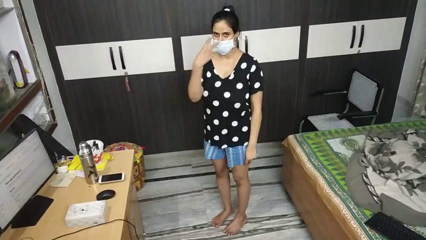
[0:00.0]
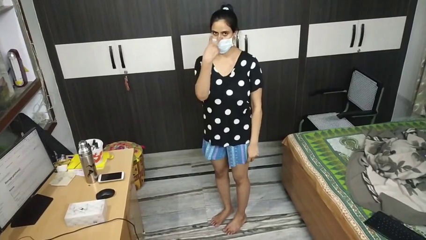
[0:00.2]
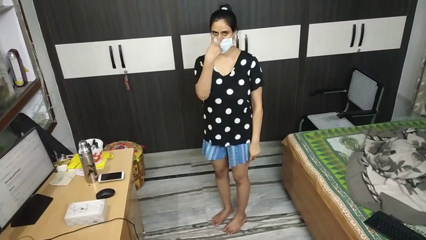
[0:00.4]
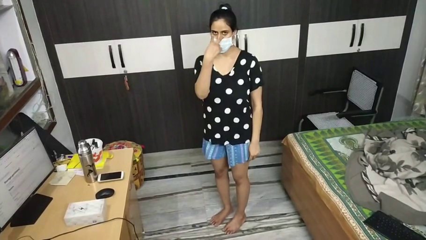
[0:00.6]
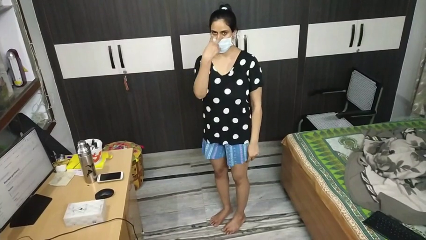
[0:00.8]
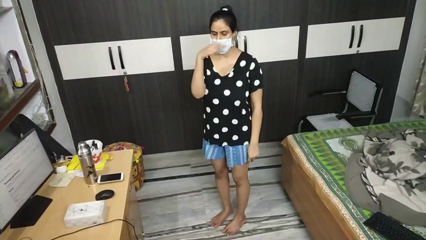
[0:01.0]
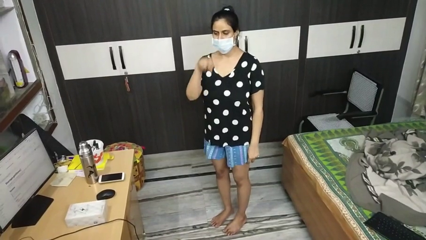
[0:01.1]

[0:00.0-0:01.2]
person gestures watch closely

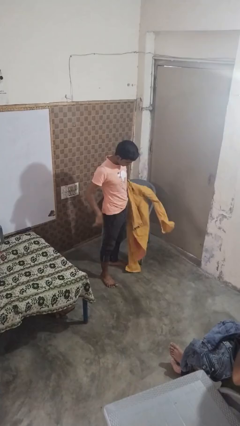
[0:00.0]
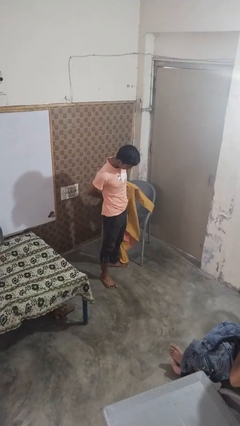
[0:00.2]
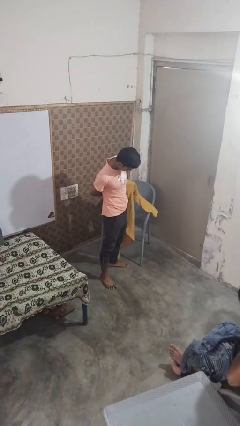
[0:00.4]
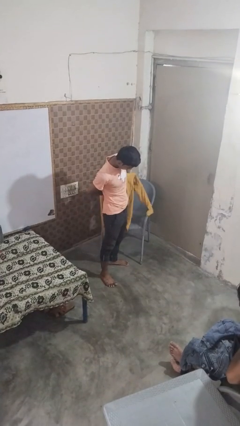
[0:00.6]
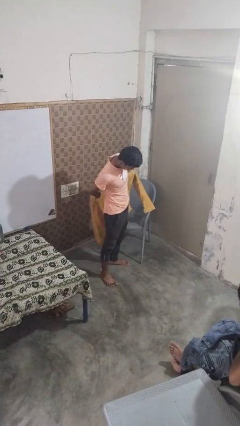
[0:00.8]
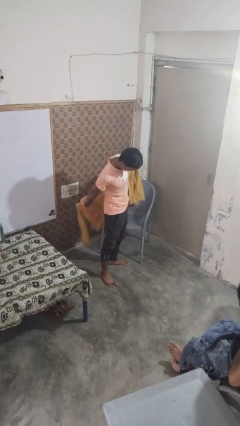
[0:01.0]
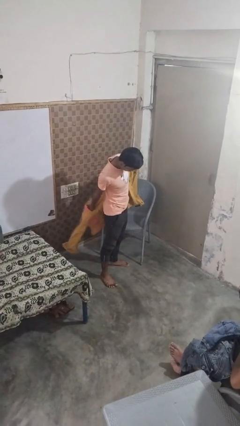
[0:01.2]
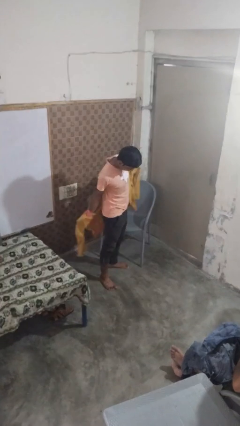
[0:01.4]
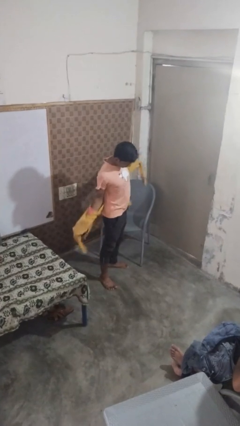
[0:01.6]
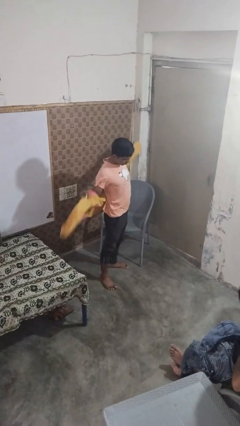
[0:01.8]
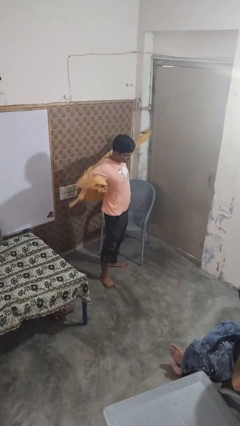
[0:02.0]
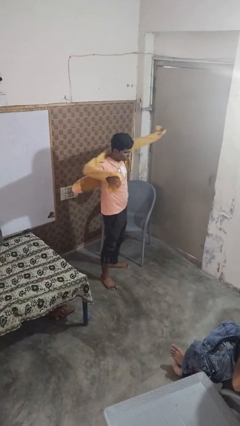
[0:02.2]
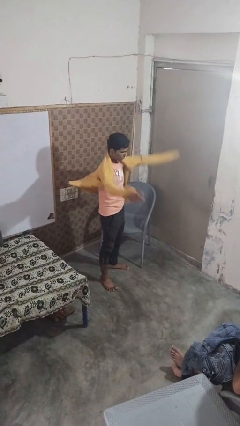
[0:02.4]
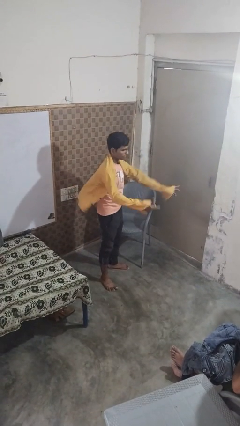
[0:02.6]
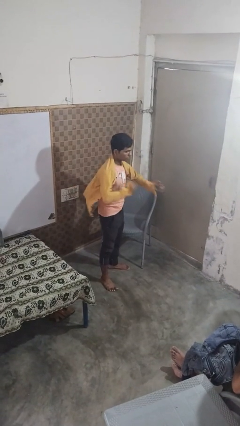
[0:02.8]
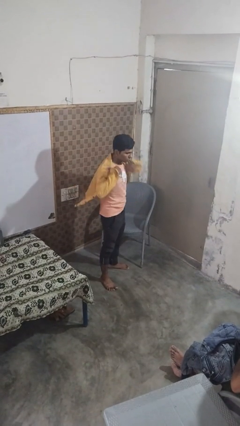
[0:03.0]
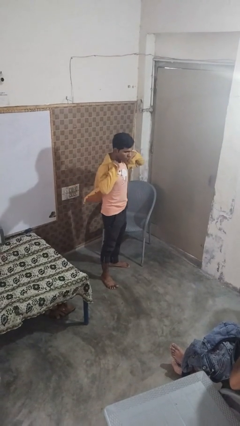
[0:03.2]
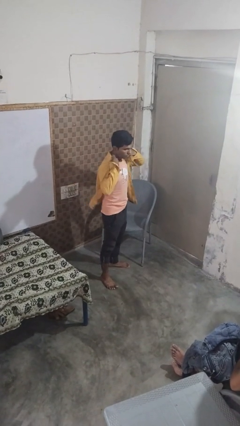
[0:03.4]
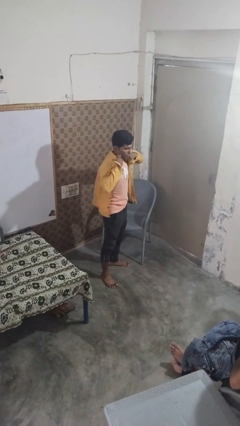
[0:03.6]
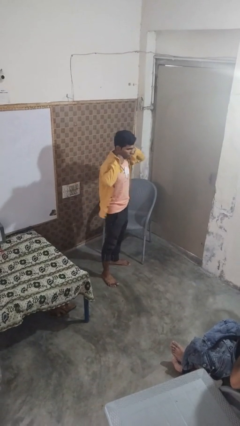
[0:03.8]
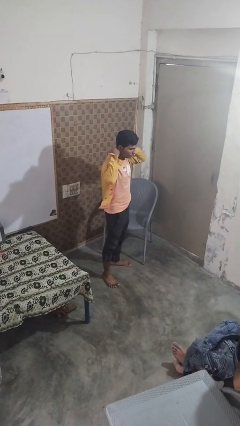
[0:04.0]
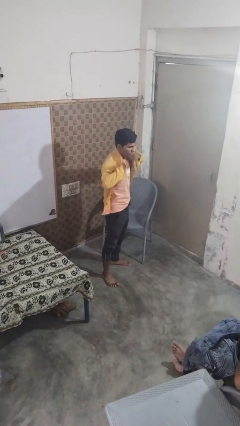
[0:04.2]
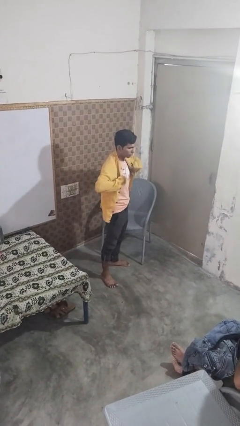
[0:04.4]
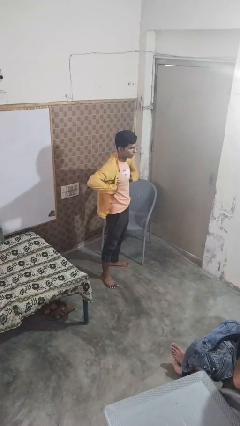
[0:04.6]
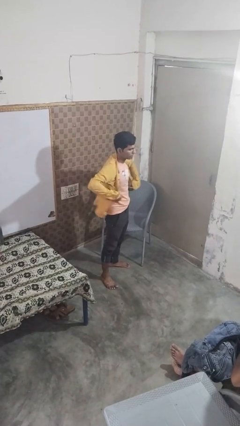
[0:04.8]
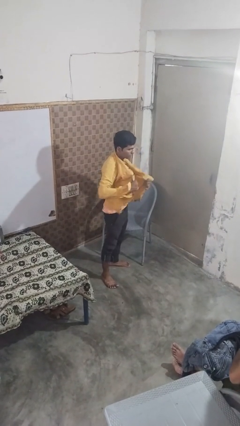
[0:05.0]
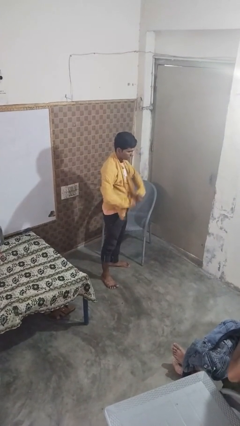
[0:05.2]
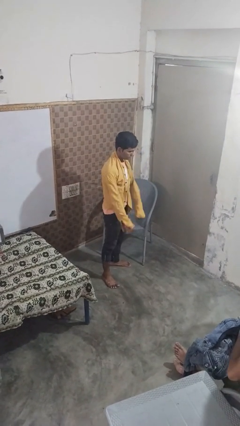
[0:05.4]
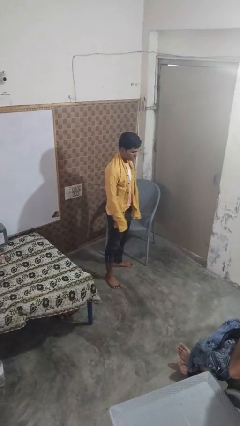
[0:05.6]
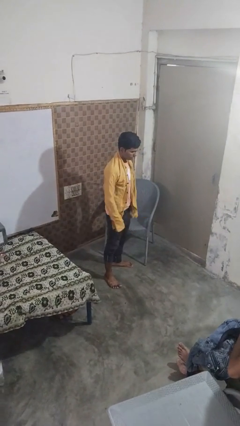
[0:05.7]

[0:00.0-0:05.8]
person puts on shirt

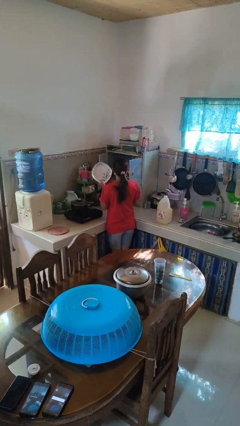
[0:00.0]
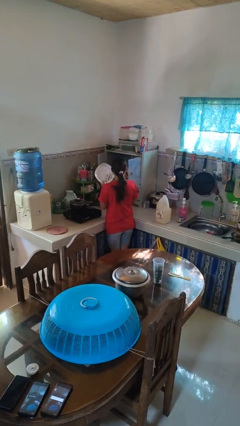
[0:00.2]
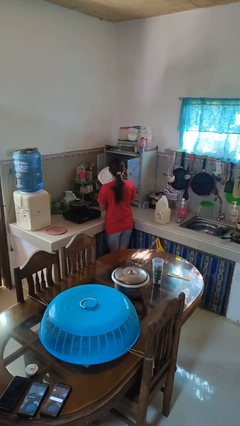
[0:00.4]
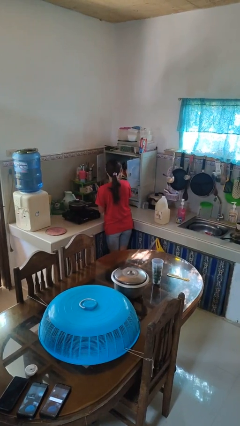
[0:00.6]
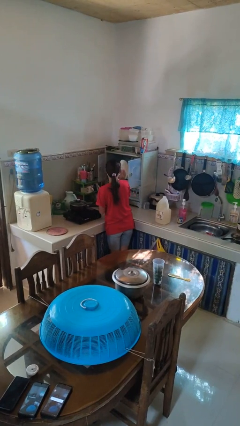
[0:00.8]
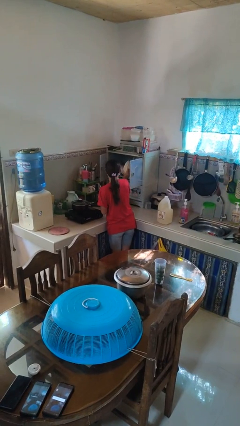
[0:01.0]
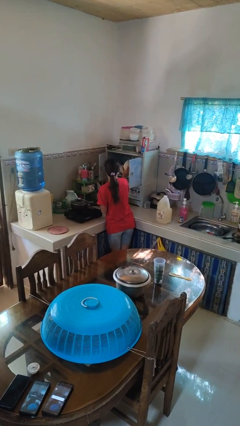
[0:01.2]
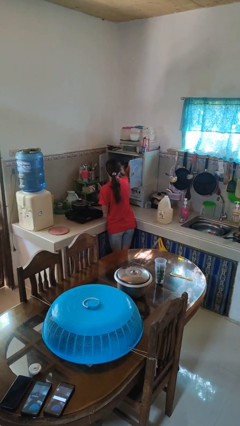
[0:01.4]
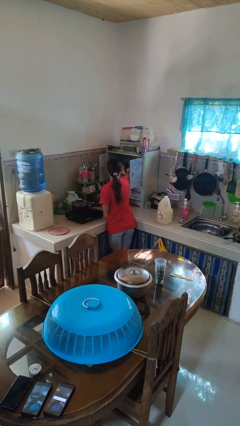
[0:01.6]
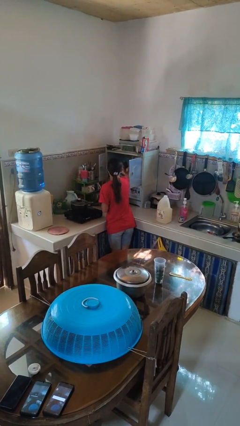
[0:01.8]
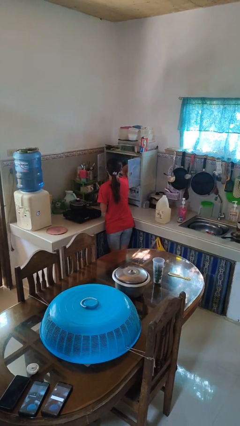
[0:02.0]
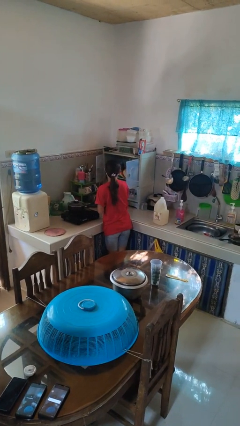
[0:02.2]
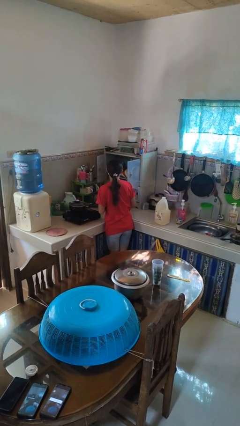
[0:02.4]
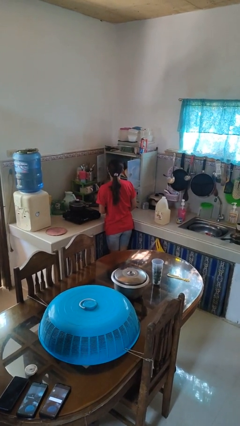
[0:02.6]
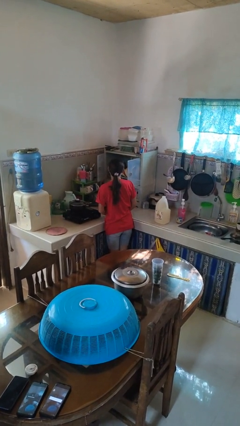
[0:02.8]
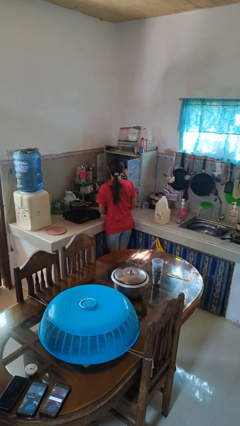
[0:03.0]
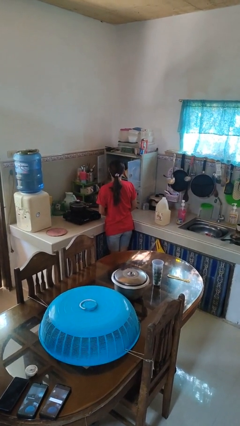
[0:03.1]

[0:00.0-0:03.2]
person puts object in cabinet

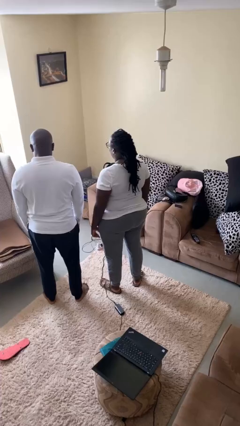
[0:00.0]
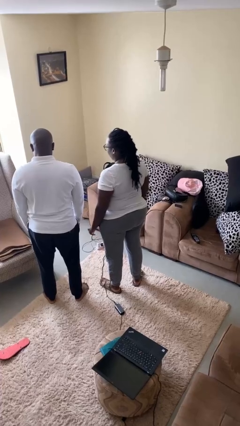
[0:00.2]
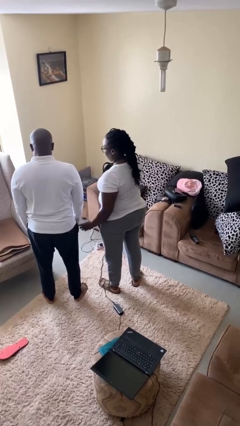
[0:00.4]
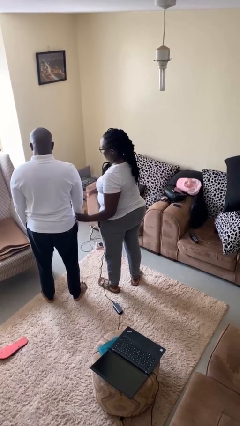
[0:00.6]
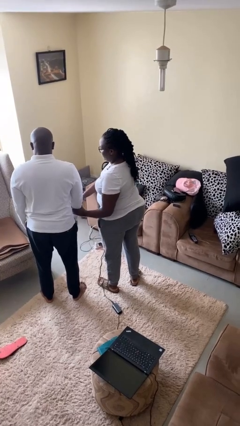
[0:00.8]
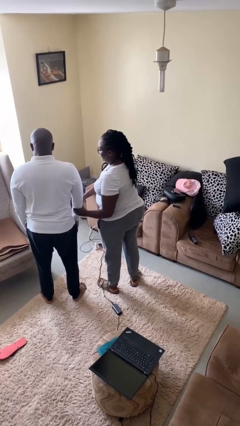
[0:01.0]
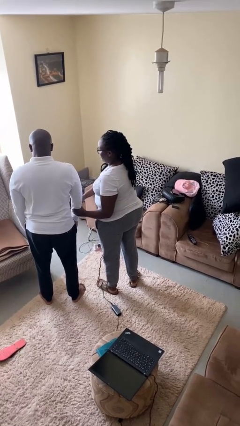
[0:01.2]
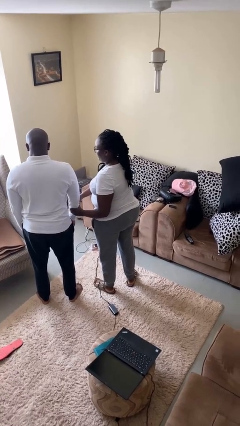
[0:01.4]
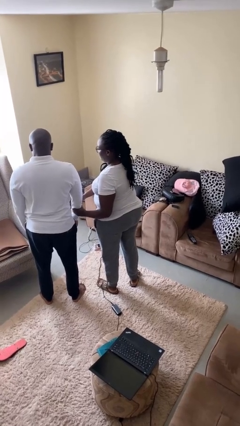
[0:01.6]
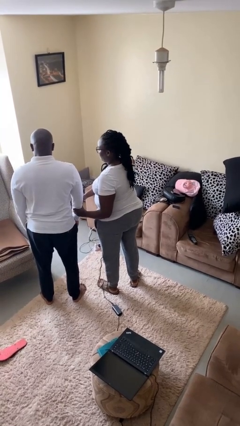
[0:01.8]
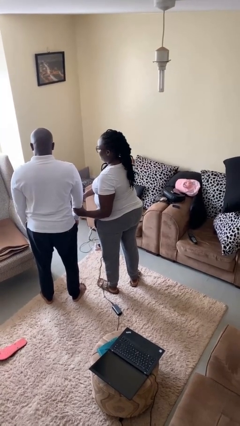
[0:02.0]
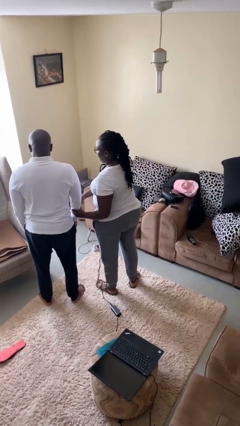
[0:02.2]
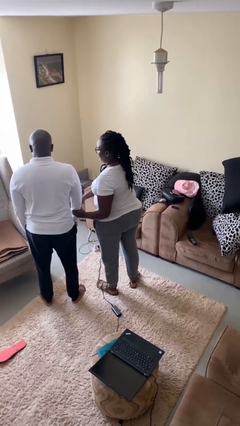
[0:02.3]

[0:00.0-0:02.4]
person grabs person by forearm

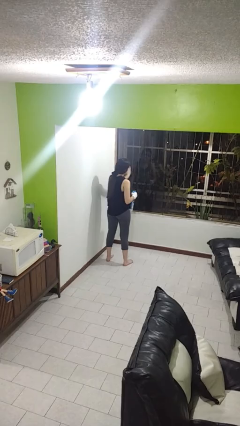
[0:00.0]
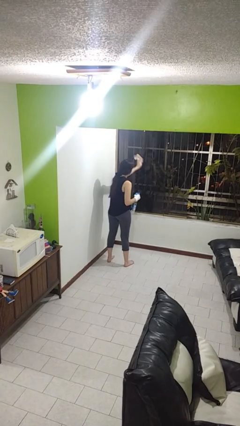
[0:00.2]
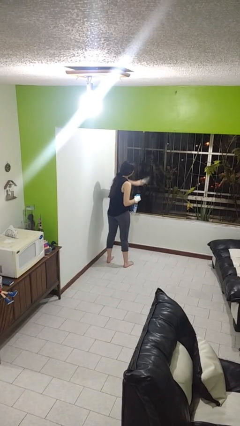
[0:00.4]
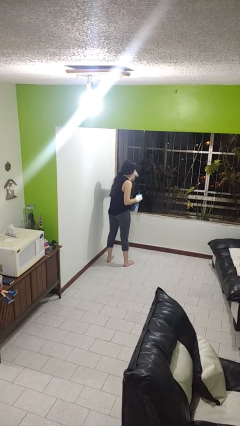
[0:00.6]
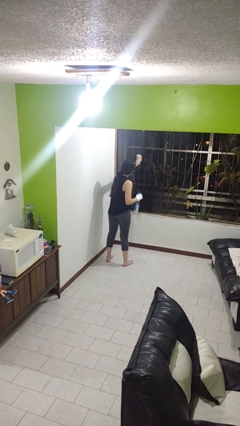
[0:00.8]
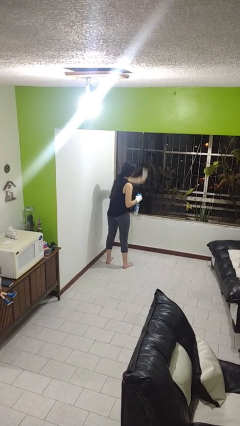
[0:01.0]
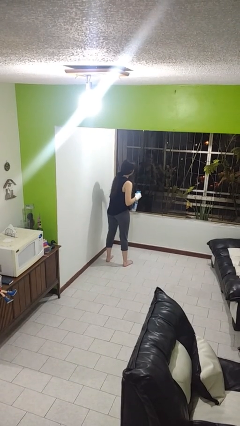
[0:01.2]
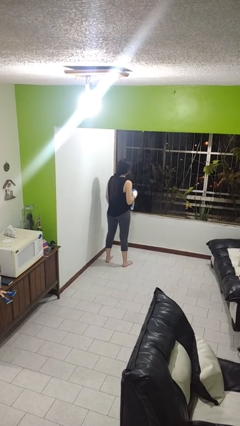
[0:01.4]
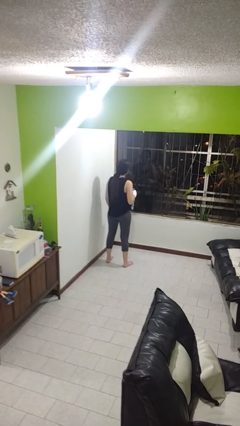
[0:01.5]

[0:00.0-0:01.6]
person washes window

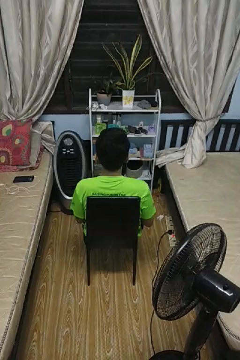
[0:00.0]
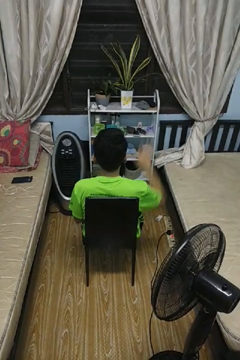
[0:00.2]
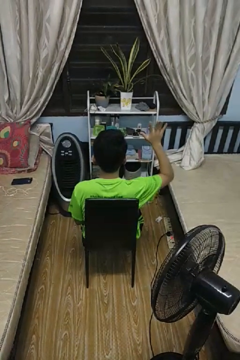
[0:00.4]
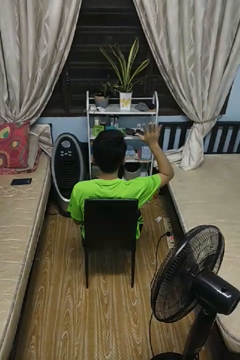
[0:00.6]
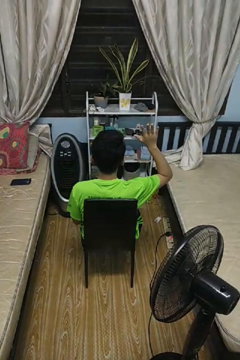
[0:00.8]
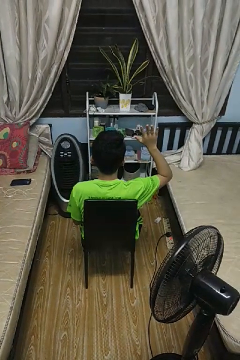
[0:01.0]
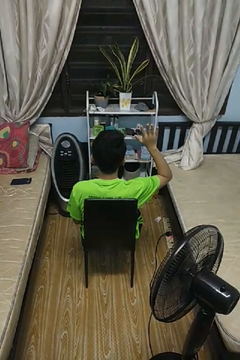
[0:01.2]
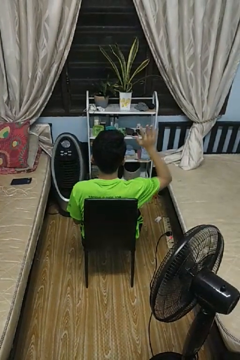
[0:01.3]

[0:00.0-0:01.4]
person gestures number five

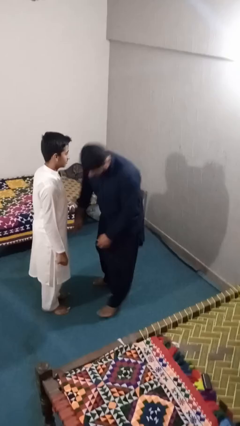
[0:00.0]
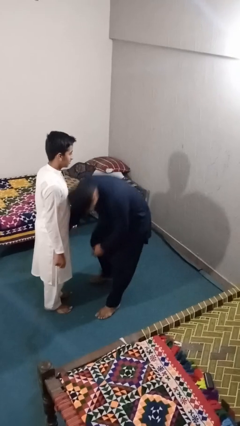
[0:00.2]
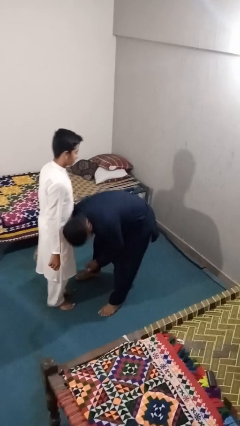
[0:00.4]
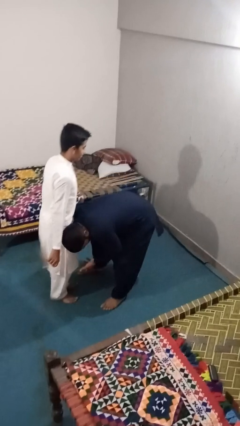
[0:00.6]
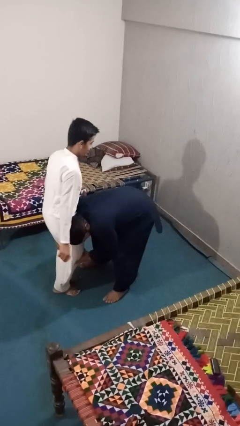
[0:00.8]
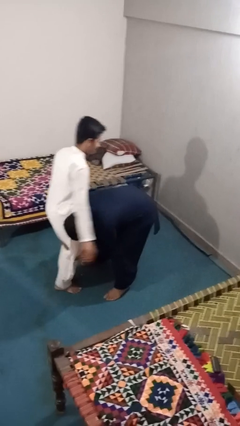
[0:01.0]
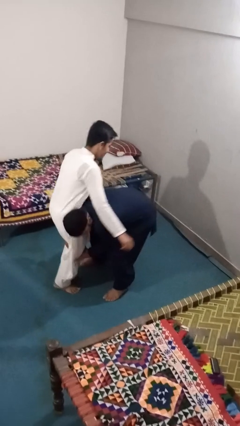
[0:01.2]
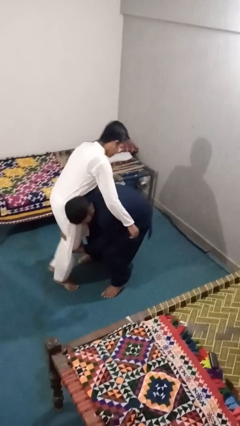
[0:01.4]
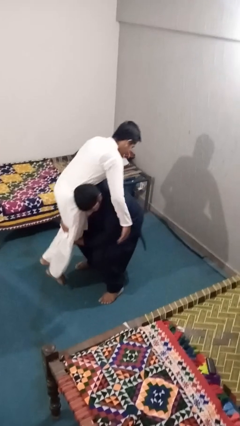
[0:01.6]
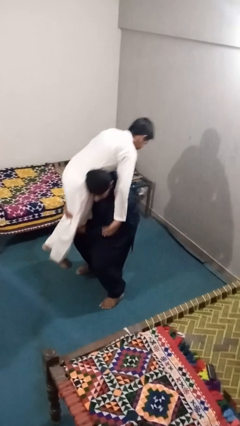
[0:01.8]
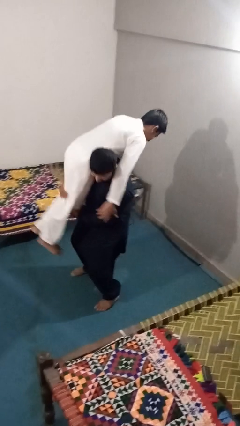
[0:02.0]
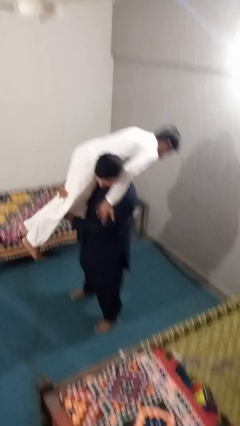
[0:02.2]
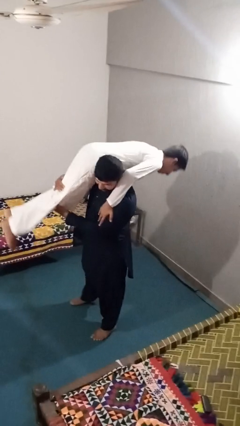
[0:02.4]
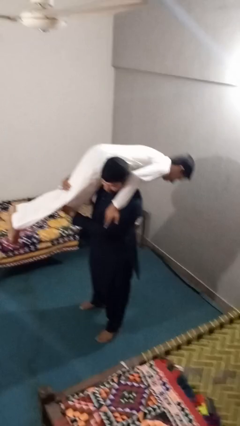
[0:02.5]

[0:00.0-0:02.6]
person carries person over shoulder
